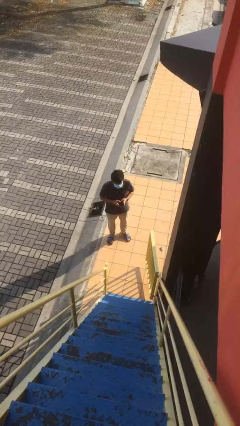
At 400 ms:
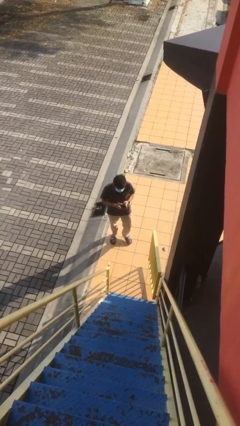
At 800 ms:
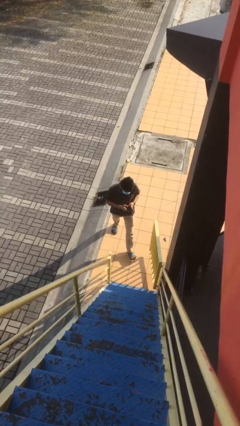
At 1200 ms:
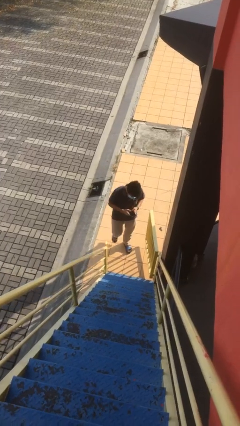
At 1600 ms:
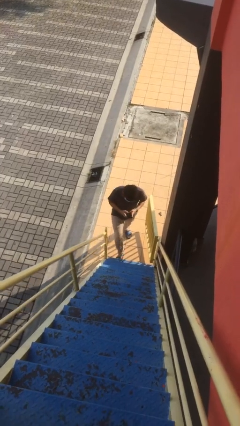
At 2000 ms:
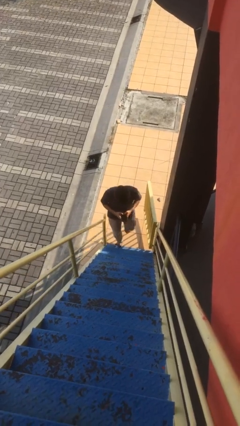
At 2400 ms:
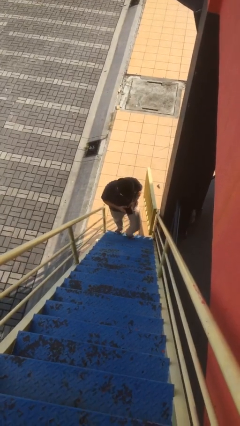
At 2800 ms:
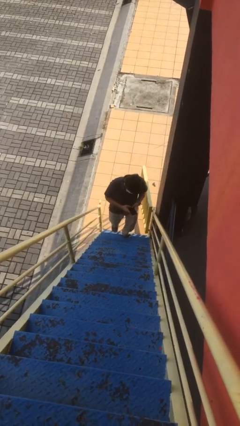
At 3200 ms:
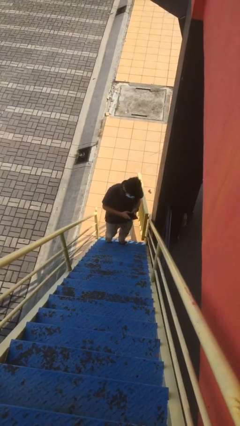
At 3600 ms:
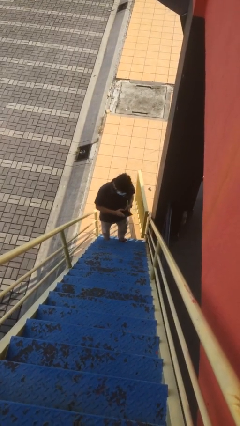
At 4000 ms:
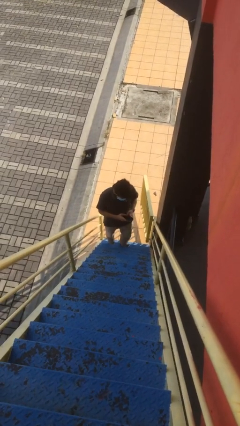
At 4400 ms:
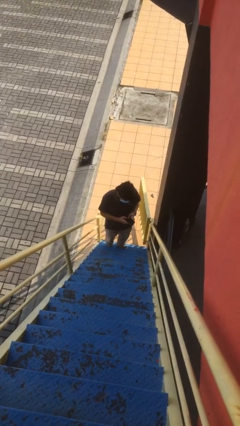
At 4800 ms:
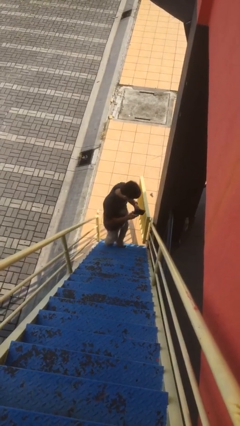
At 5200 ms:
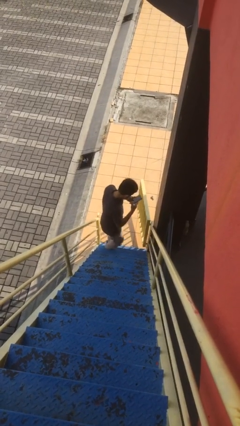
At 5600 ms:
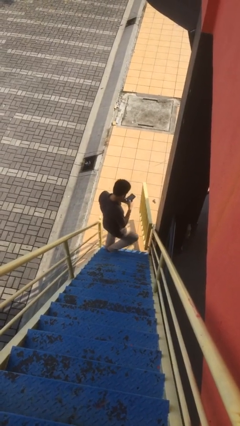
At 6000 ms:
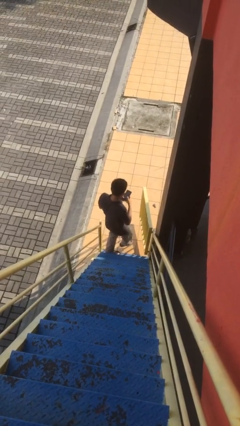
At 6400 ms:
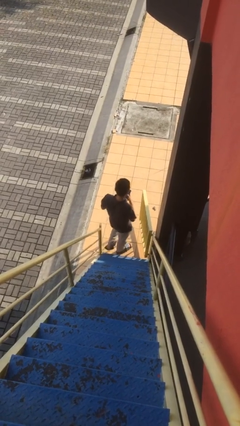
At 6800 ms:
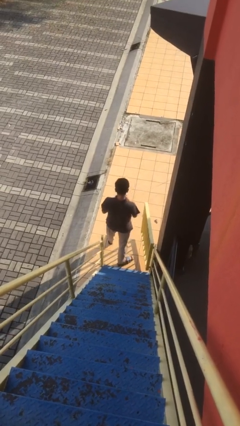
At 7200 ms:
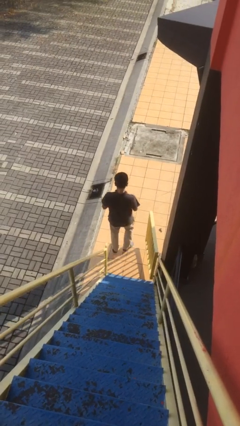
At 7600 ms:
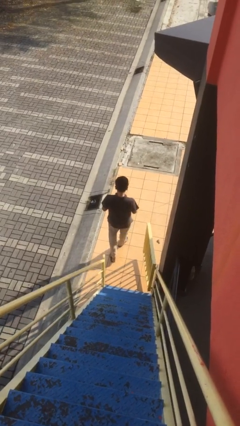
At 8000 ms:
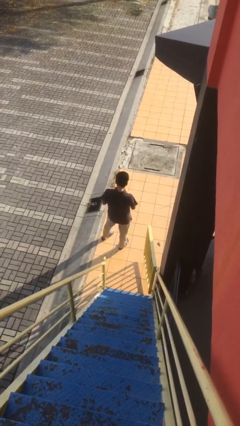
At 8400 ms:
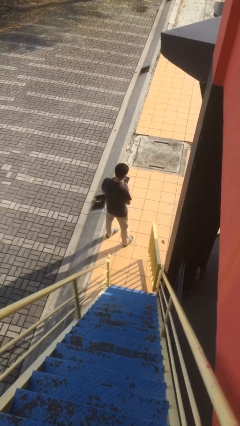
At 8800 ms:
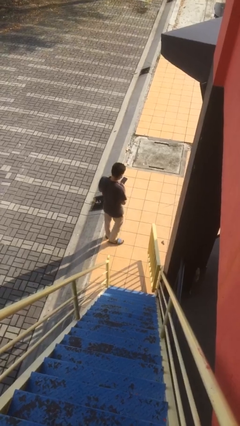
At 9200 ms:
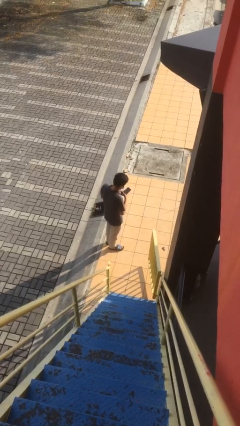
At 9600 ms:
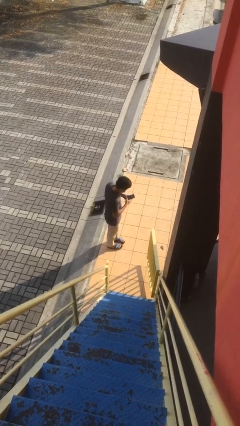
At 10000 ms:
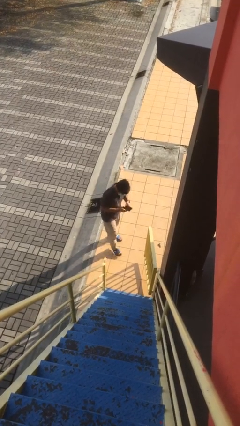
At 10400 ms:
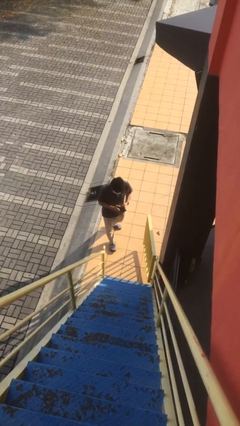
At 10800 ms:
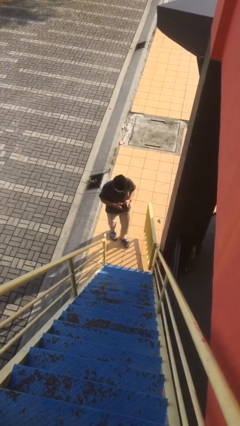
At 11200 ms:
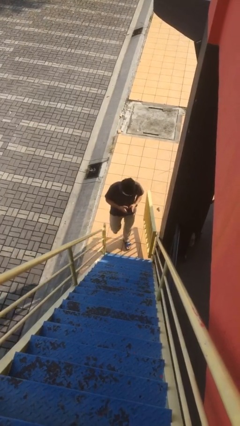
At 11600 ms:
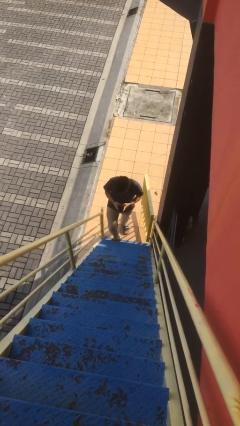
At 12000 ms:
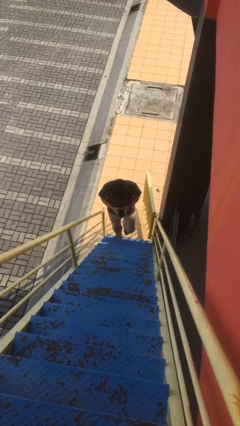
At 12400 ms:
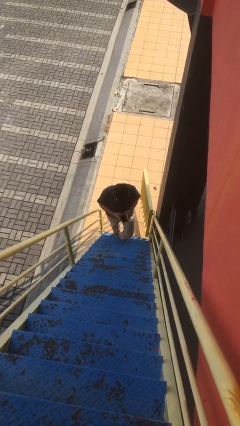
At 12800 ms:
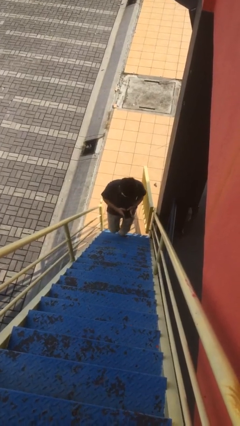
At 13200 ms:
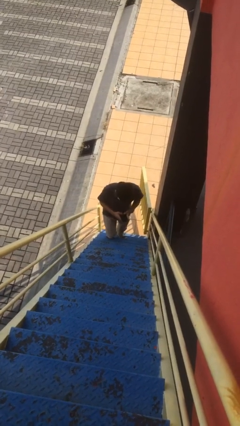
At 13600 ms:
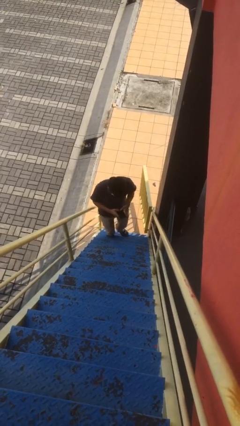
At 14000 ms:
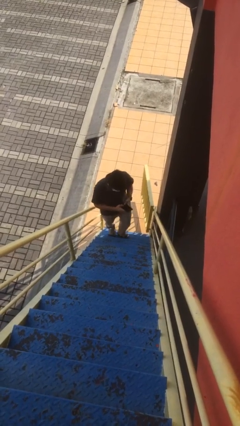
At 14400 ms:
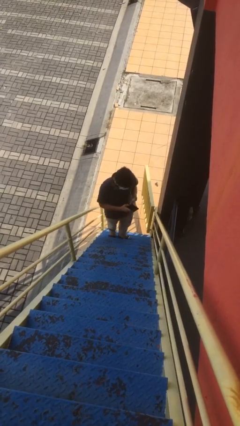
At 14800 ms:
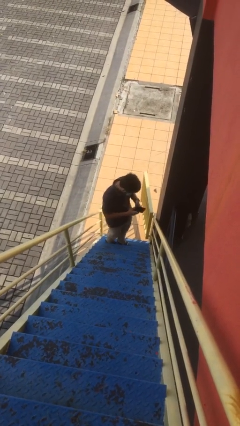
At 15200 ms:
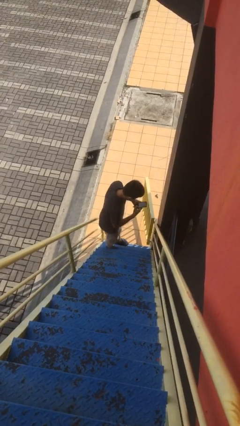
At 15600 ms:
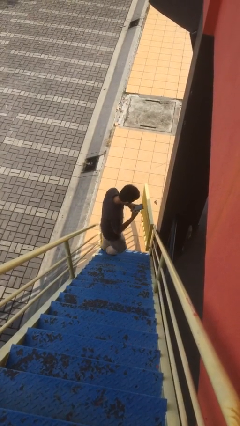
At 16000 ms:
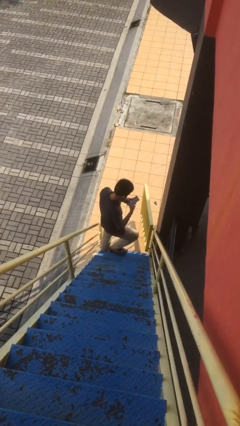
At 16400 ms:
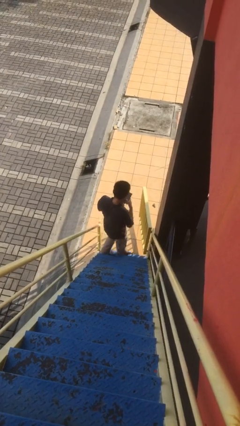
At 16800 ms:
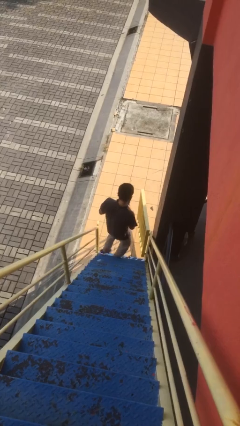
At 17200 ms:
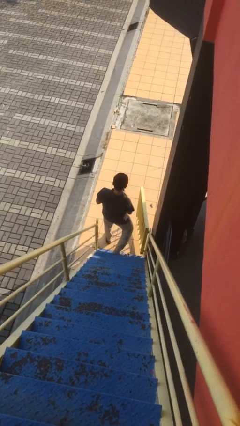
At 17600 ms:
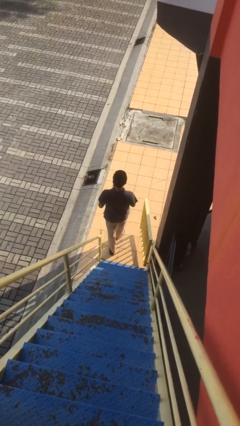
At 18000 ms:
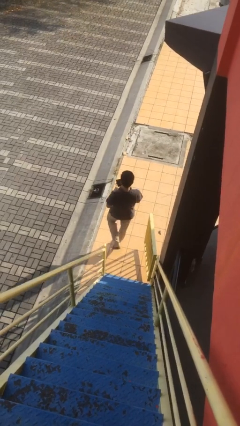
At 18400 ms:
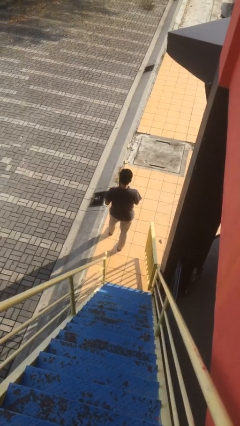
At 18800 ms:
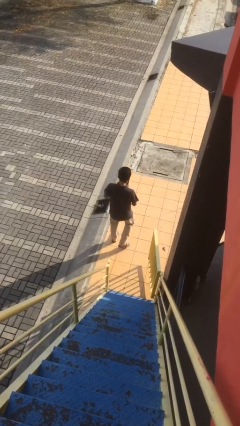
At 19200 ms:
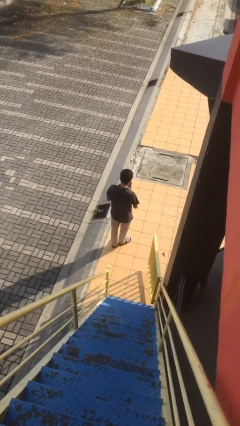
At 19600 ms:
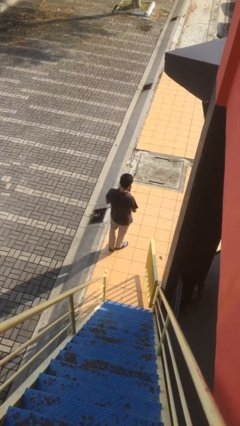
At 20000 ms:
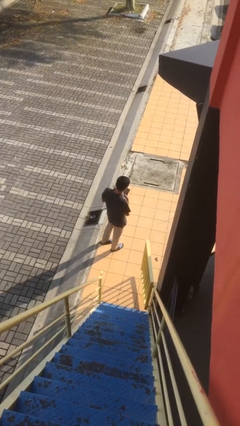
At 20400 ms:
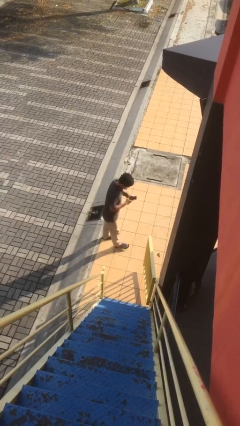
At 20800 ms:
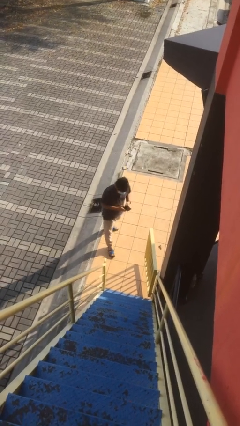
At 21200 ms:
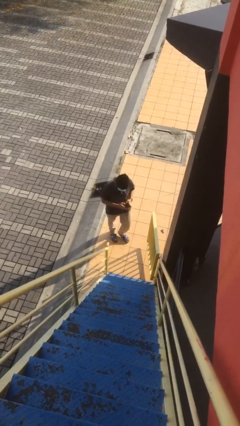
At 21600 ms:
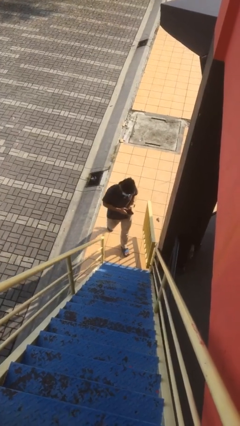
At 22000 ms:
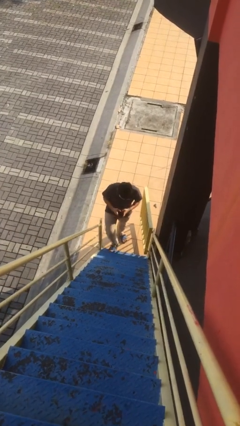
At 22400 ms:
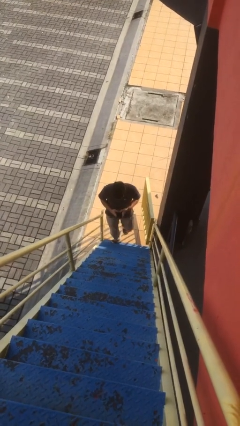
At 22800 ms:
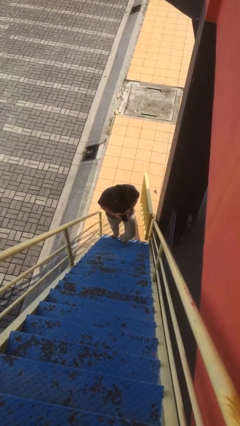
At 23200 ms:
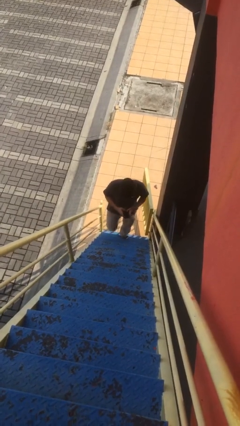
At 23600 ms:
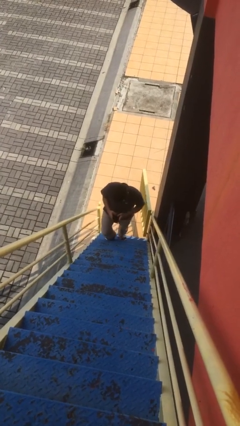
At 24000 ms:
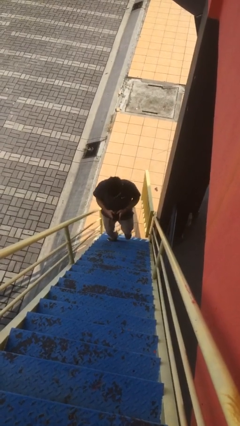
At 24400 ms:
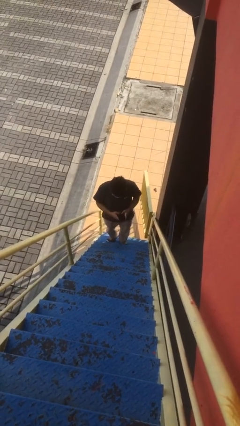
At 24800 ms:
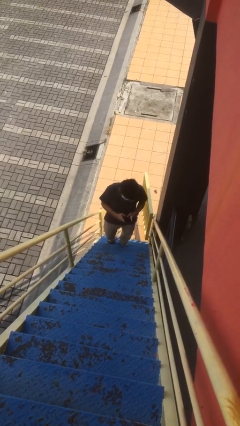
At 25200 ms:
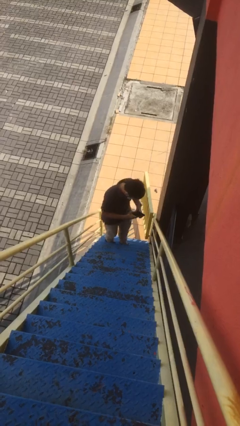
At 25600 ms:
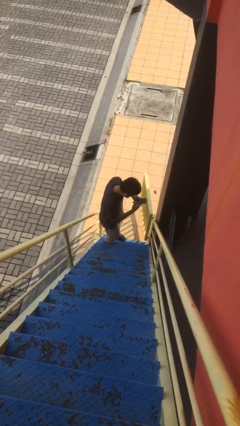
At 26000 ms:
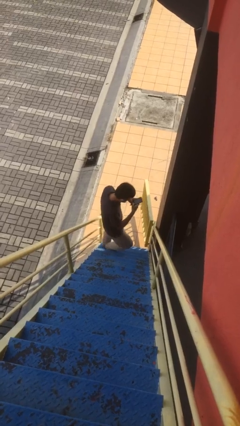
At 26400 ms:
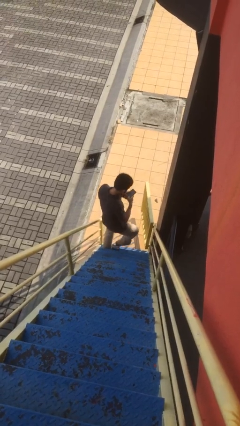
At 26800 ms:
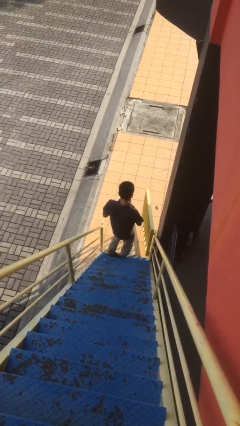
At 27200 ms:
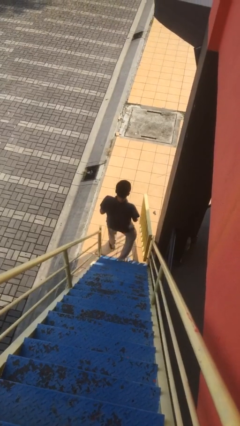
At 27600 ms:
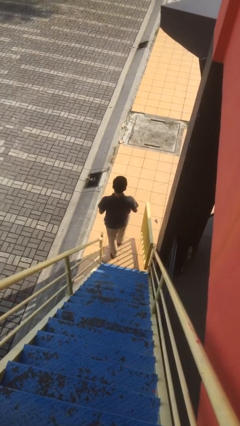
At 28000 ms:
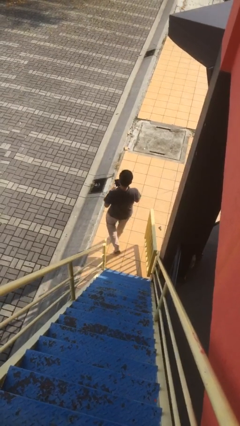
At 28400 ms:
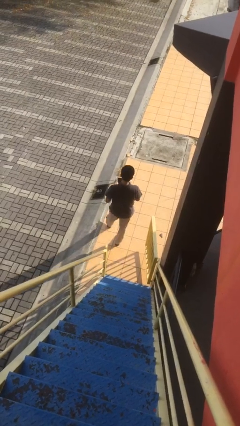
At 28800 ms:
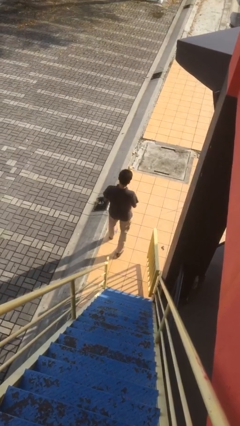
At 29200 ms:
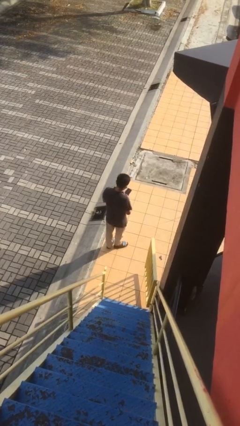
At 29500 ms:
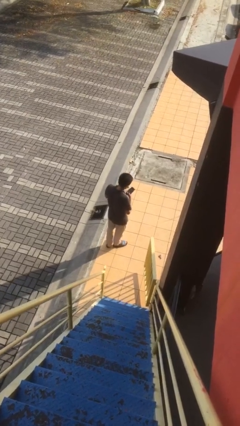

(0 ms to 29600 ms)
person texts on phone

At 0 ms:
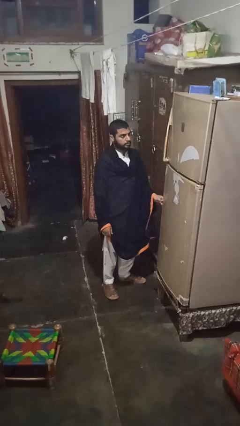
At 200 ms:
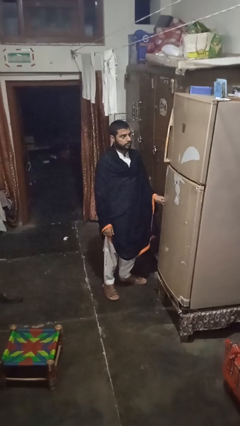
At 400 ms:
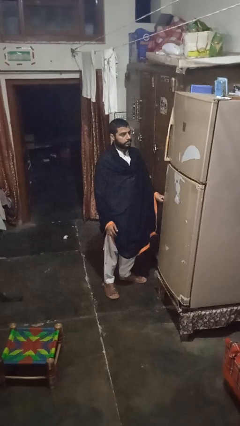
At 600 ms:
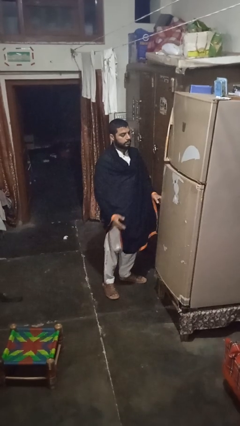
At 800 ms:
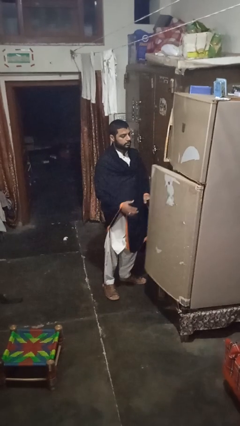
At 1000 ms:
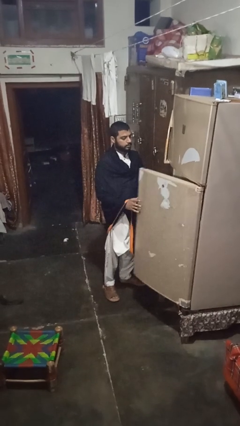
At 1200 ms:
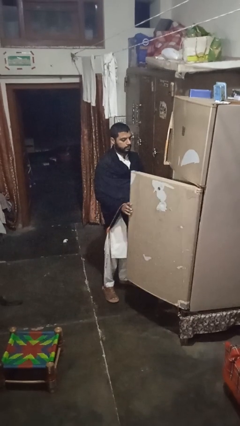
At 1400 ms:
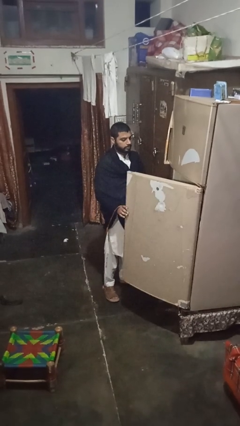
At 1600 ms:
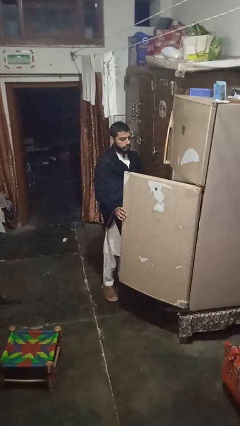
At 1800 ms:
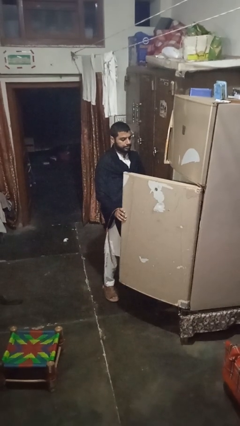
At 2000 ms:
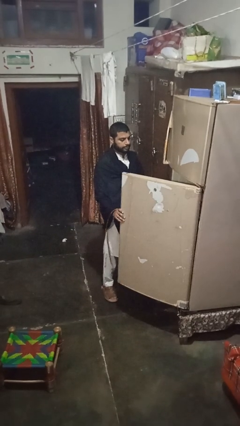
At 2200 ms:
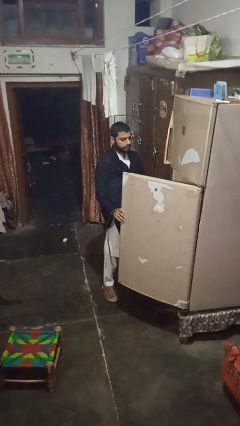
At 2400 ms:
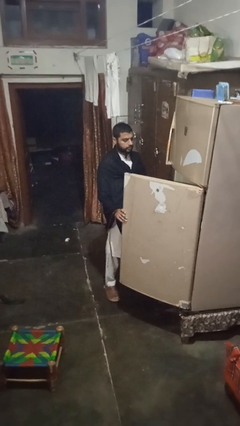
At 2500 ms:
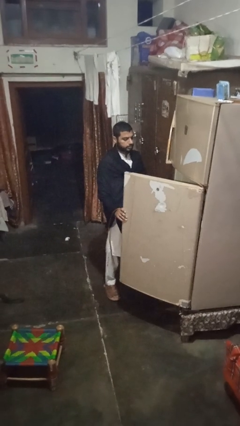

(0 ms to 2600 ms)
person opens refrigerator

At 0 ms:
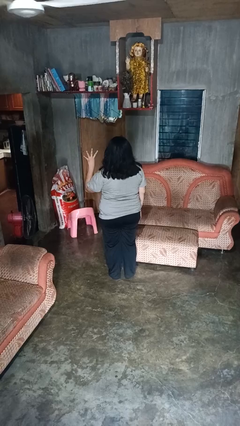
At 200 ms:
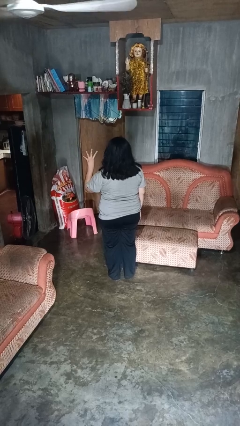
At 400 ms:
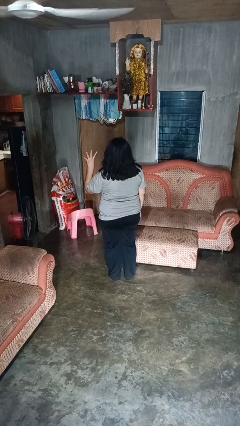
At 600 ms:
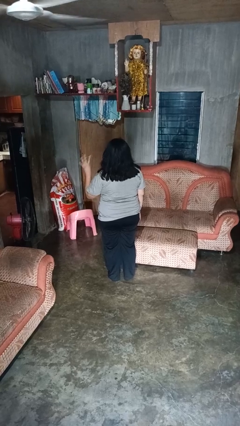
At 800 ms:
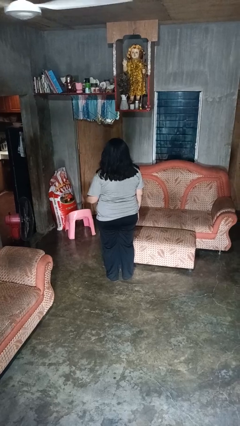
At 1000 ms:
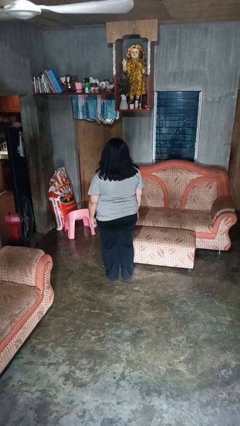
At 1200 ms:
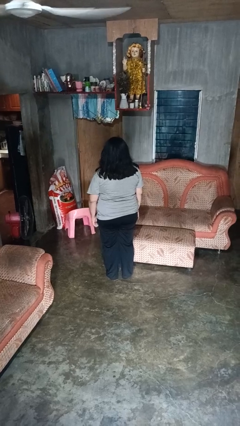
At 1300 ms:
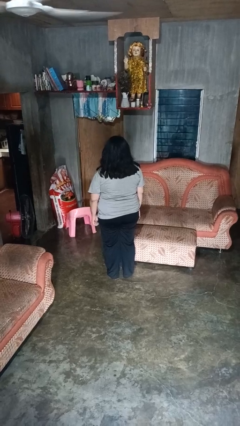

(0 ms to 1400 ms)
person gestures number four
